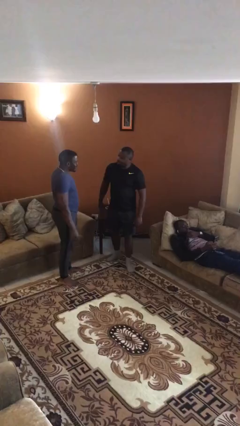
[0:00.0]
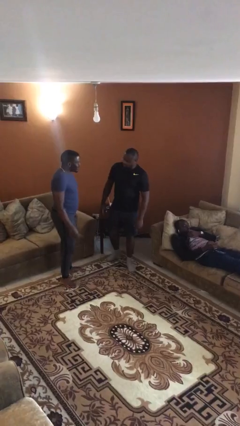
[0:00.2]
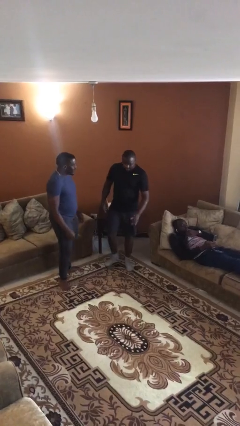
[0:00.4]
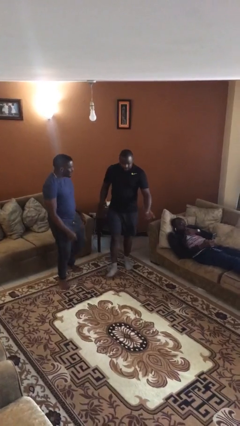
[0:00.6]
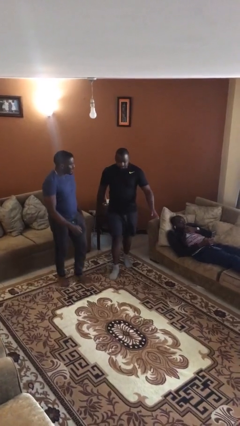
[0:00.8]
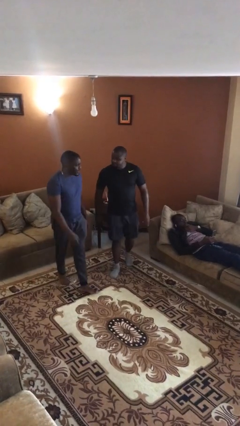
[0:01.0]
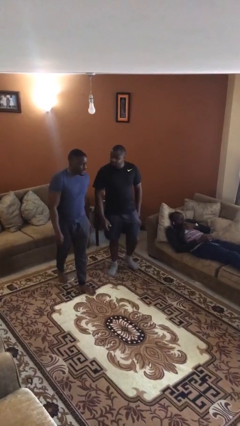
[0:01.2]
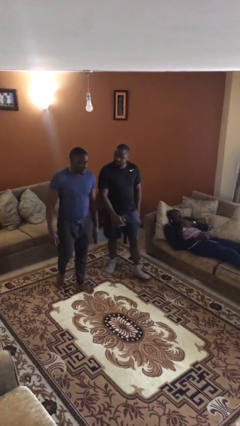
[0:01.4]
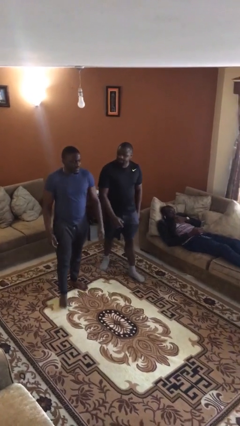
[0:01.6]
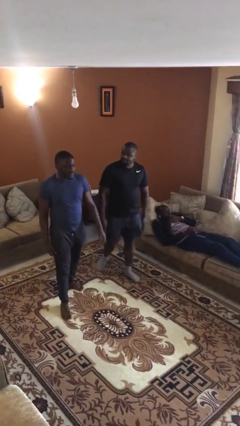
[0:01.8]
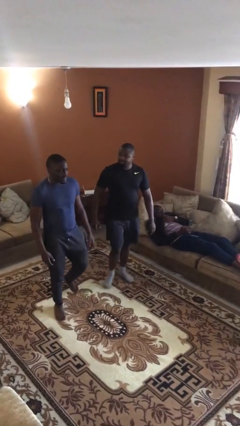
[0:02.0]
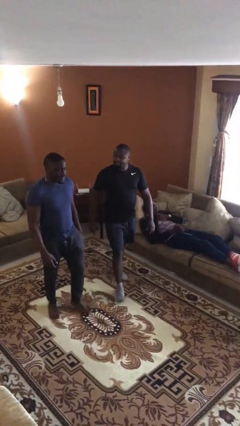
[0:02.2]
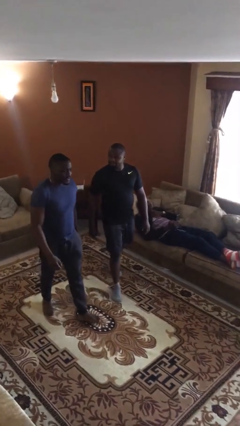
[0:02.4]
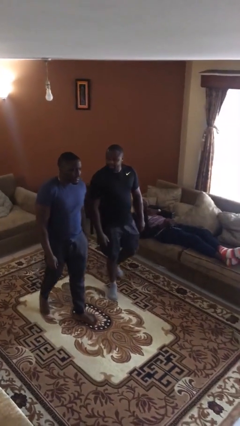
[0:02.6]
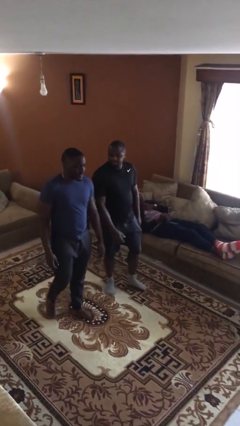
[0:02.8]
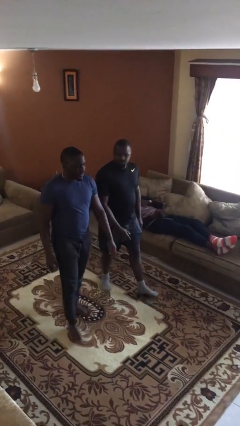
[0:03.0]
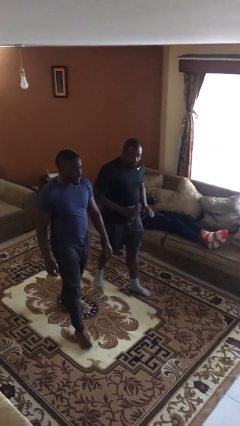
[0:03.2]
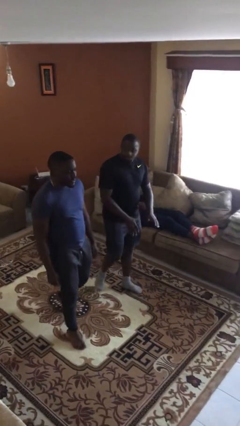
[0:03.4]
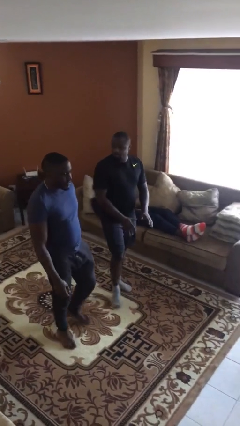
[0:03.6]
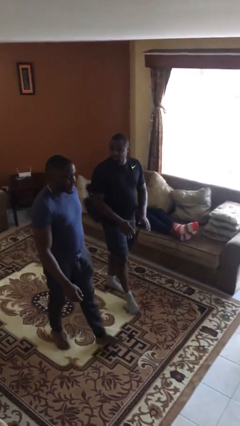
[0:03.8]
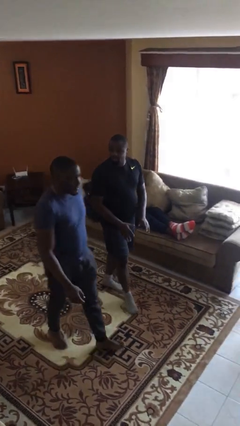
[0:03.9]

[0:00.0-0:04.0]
person talks to person

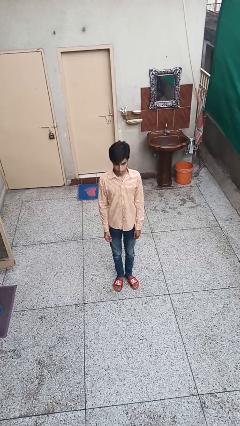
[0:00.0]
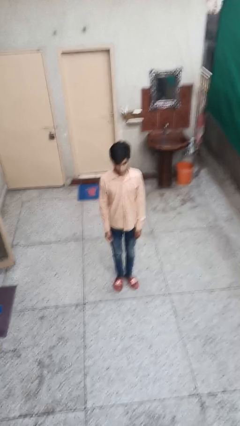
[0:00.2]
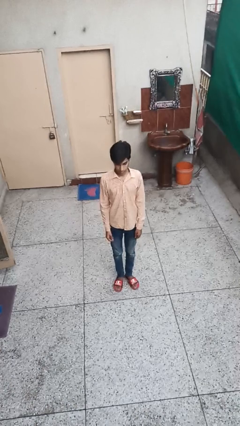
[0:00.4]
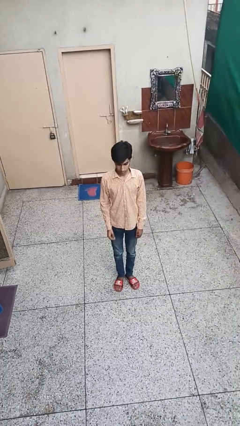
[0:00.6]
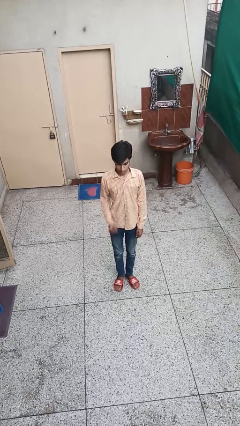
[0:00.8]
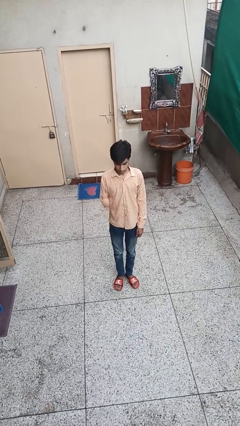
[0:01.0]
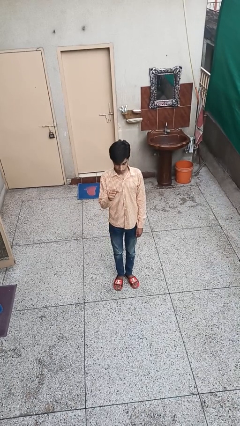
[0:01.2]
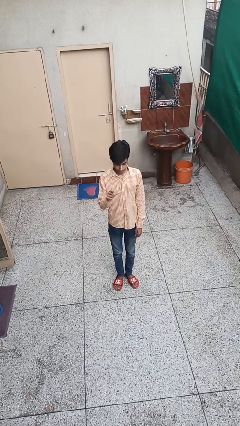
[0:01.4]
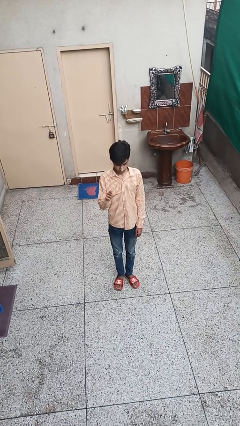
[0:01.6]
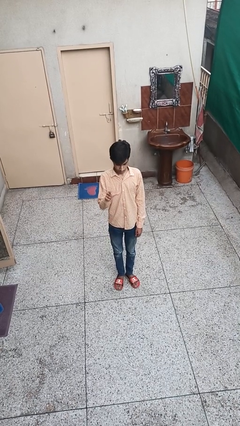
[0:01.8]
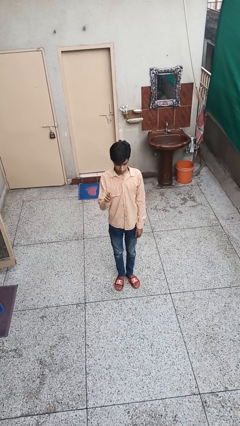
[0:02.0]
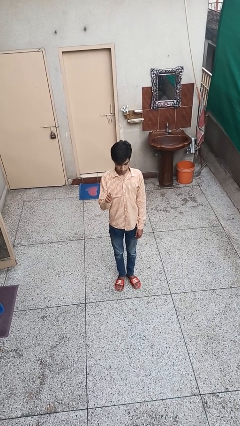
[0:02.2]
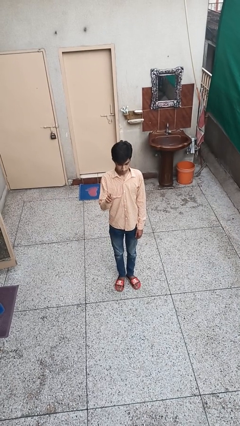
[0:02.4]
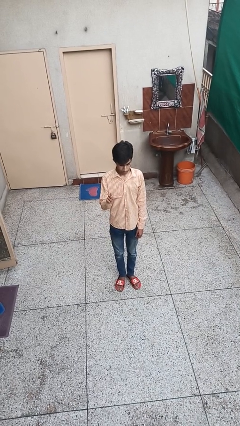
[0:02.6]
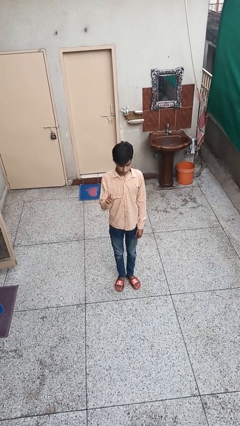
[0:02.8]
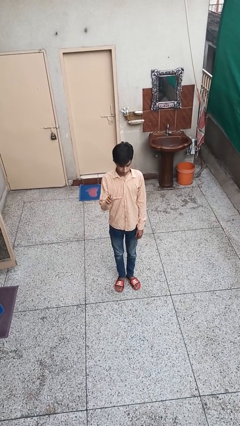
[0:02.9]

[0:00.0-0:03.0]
person gestures zoom in

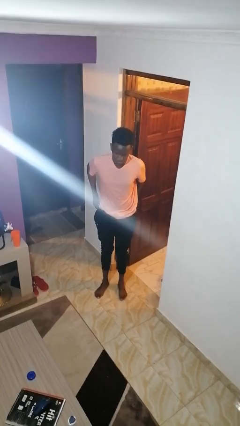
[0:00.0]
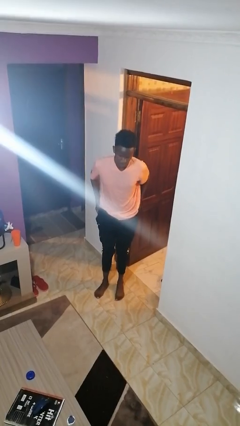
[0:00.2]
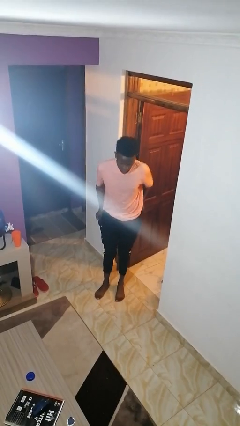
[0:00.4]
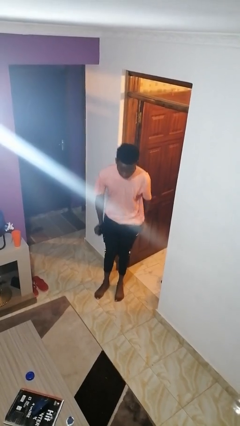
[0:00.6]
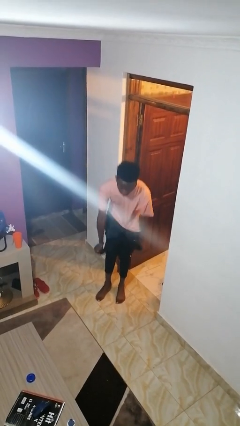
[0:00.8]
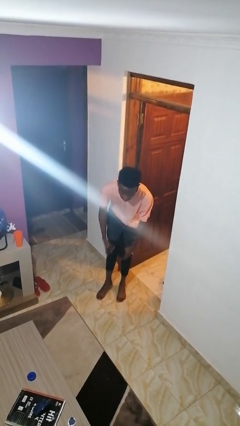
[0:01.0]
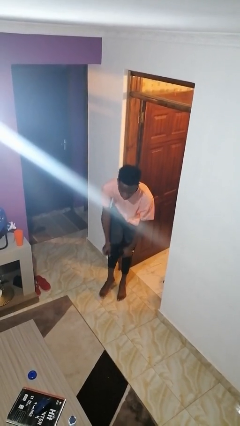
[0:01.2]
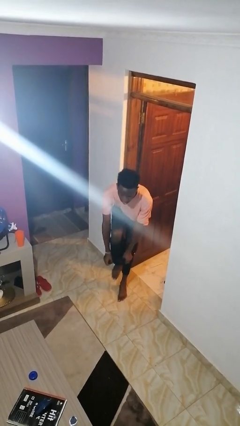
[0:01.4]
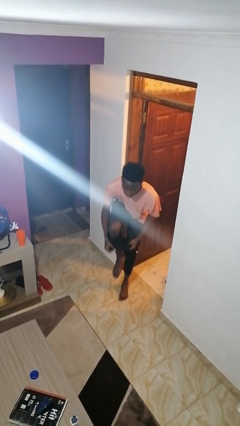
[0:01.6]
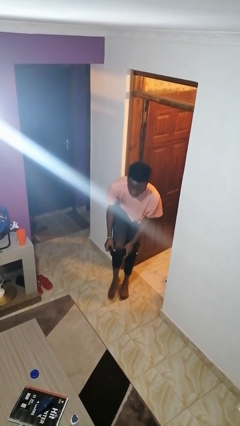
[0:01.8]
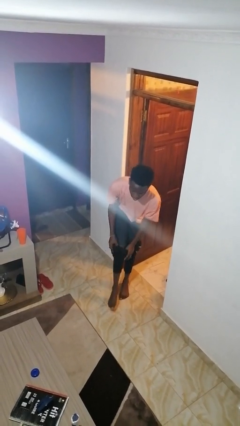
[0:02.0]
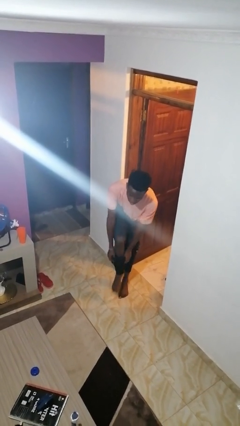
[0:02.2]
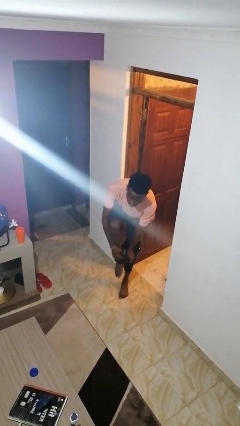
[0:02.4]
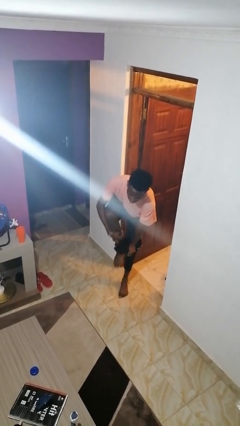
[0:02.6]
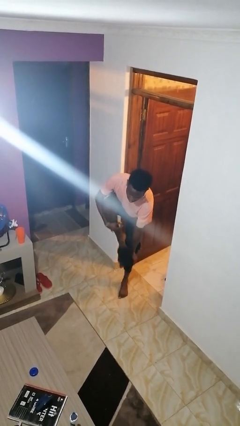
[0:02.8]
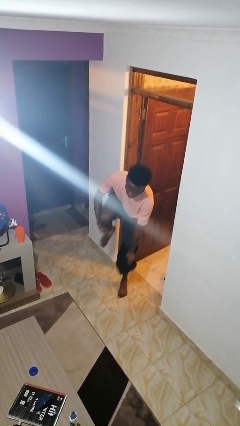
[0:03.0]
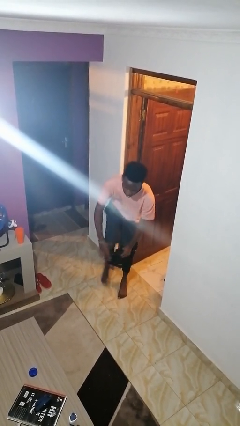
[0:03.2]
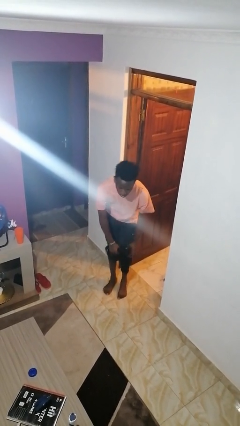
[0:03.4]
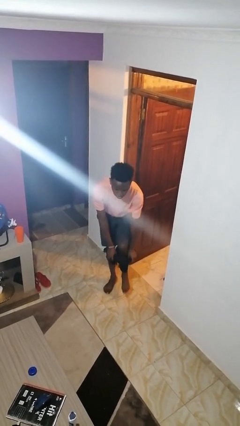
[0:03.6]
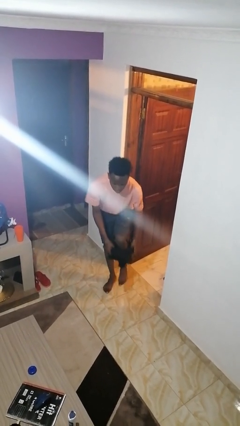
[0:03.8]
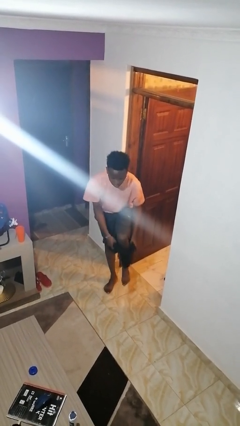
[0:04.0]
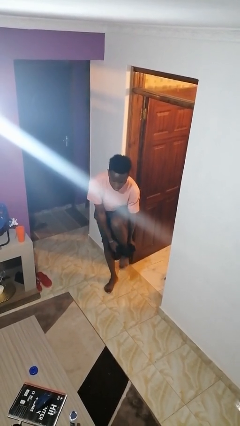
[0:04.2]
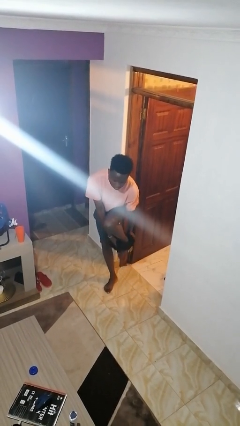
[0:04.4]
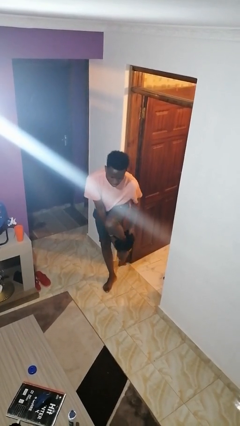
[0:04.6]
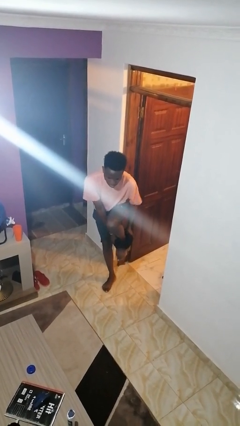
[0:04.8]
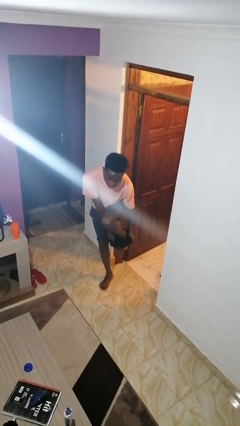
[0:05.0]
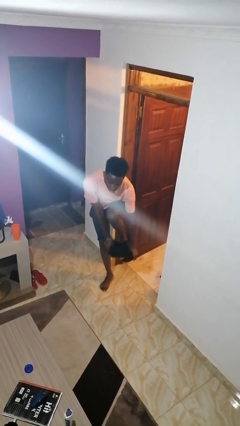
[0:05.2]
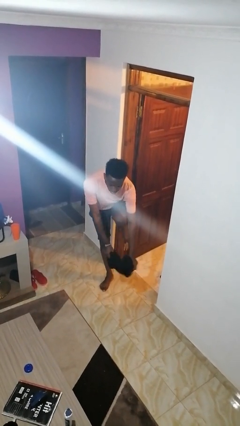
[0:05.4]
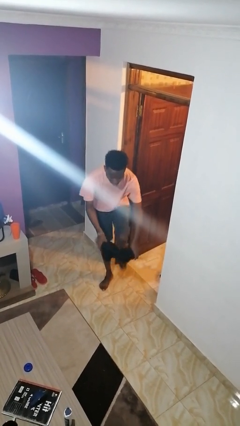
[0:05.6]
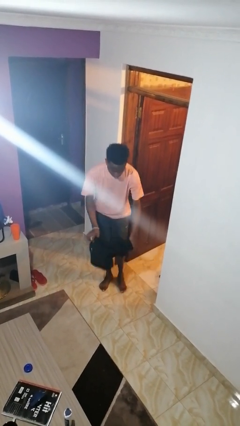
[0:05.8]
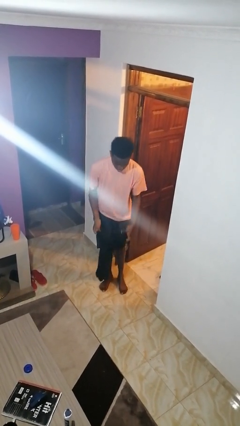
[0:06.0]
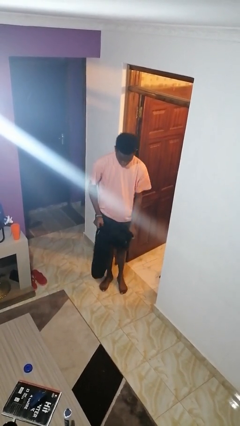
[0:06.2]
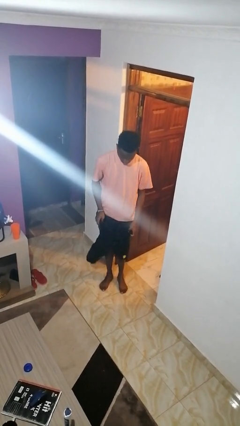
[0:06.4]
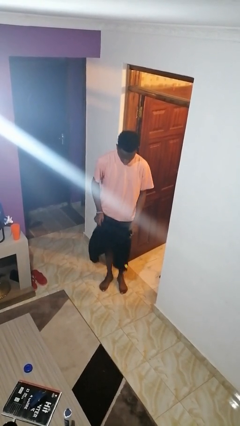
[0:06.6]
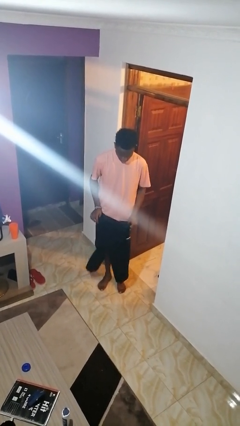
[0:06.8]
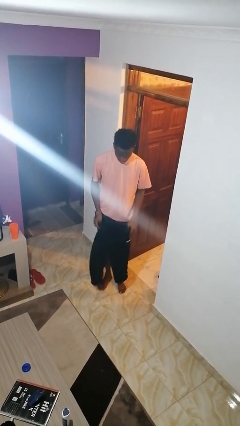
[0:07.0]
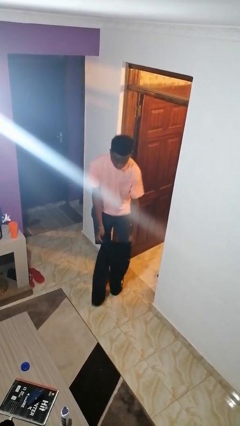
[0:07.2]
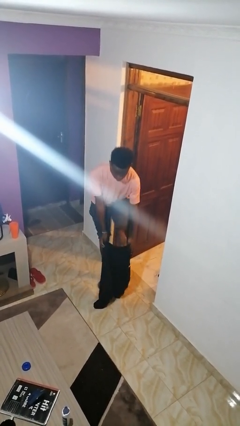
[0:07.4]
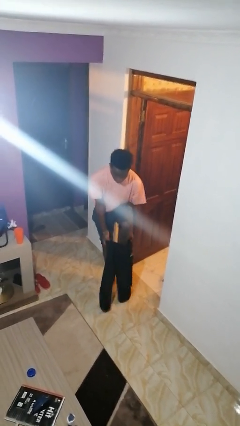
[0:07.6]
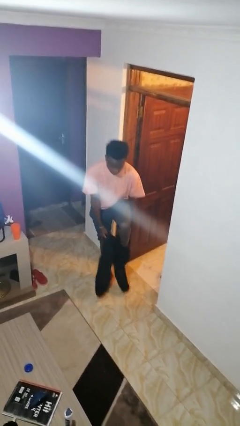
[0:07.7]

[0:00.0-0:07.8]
person takes off pants

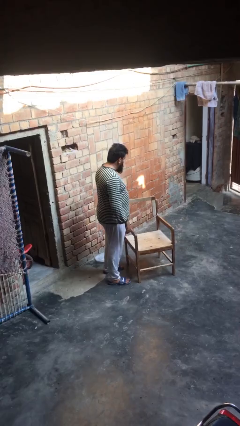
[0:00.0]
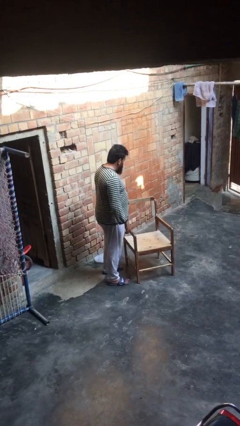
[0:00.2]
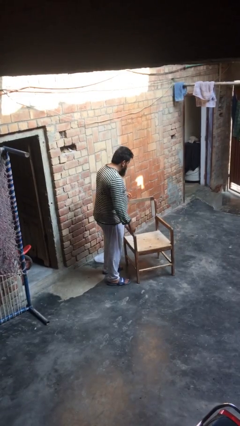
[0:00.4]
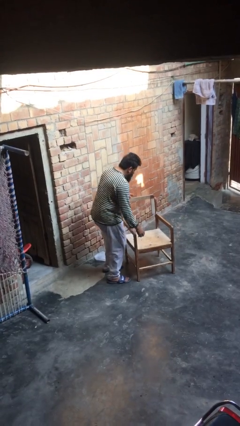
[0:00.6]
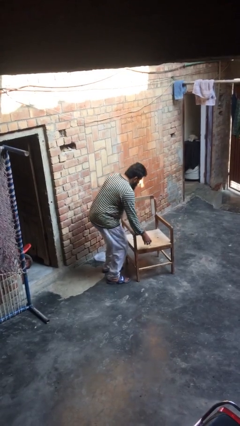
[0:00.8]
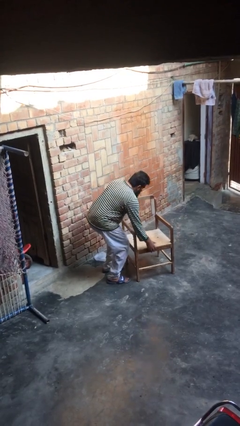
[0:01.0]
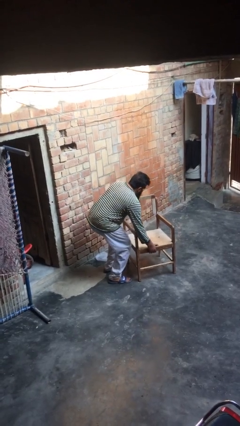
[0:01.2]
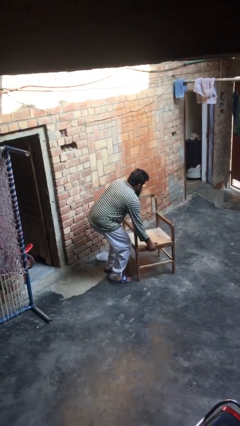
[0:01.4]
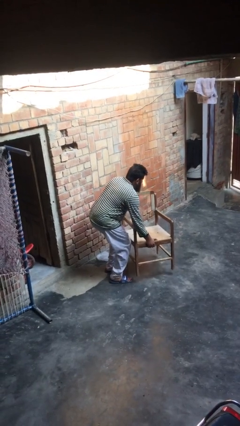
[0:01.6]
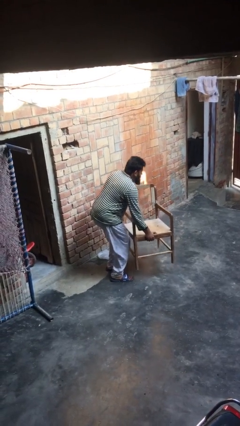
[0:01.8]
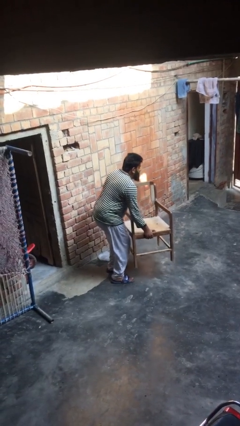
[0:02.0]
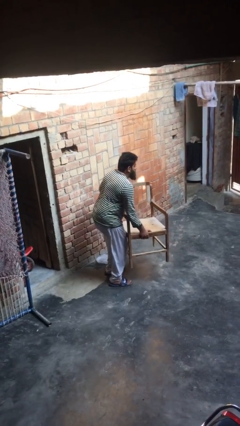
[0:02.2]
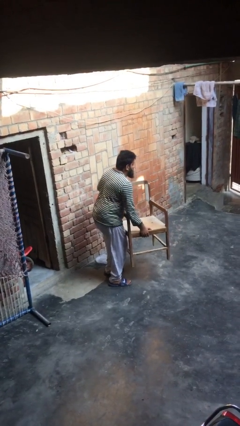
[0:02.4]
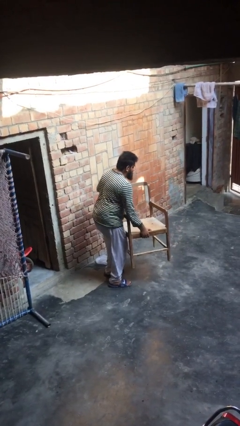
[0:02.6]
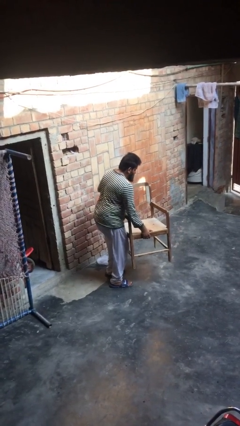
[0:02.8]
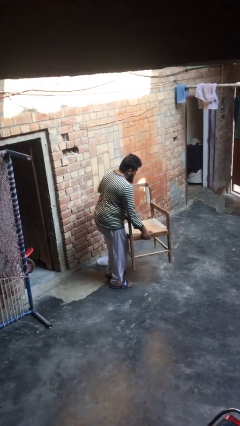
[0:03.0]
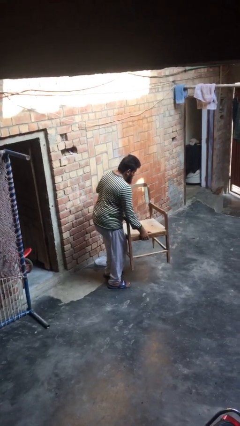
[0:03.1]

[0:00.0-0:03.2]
person picks up object from floor
